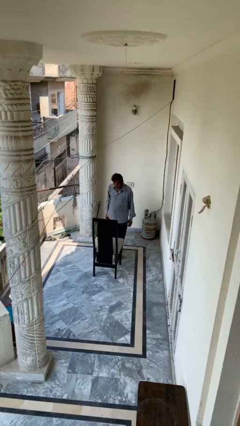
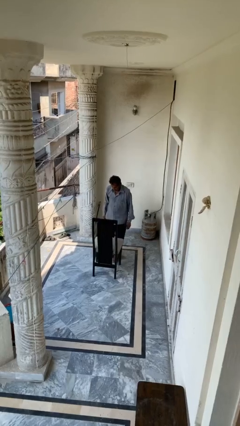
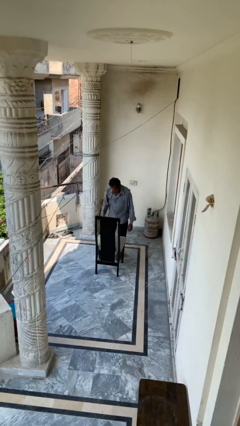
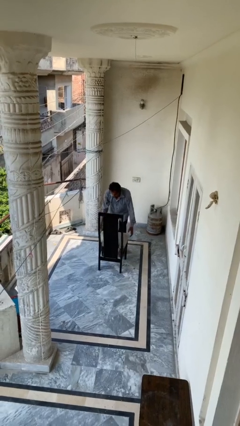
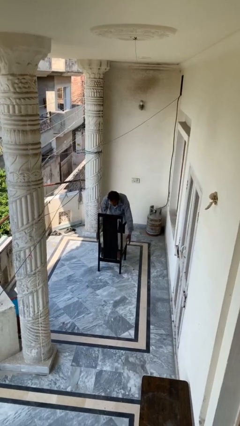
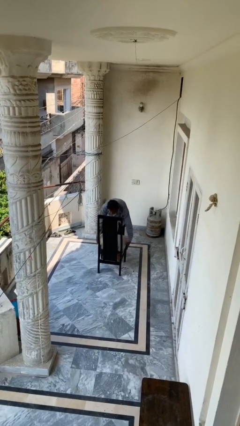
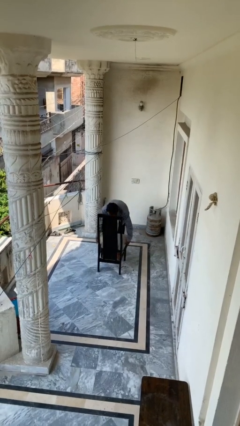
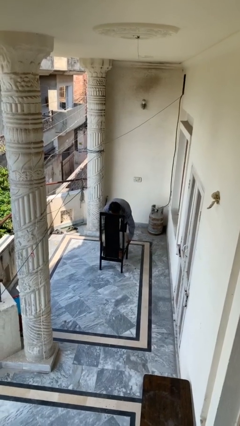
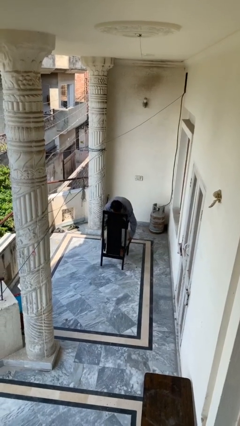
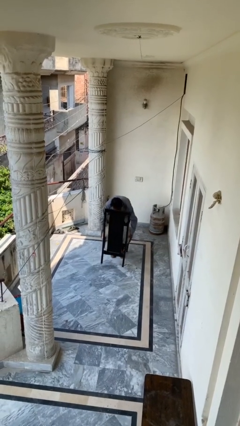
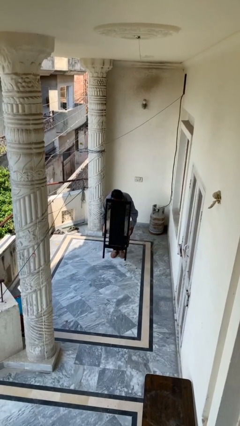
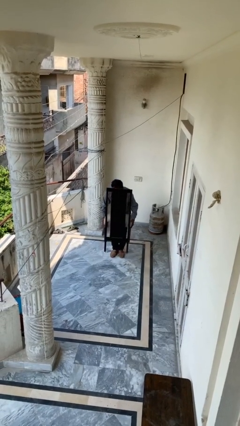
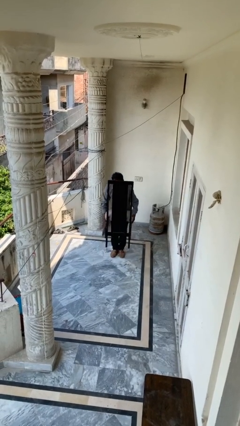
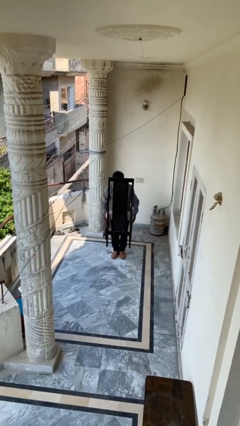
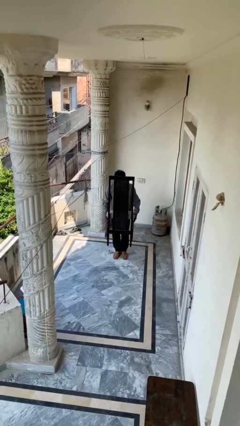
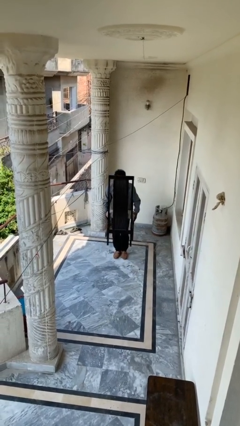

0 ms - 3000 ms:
person picks up object from floor

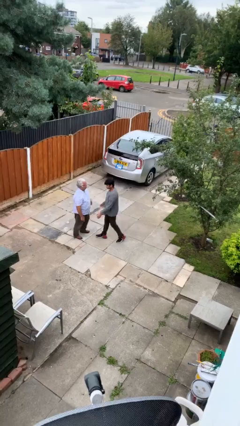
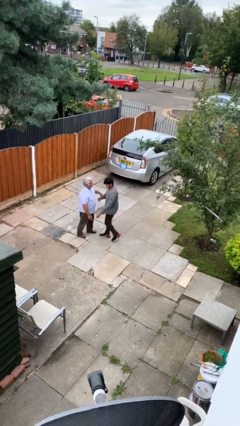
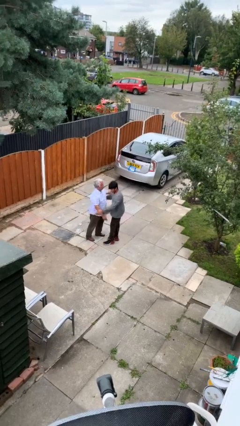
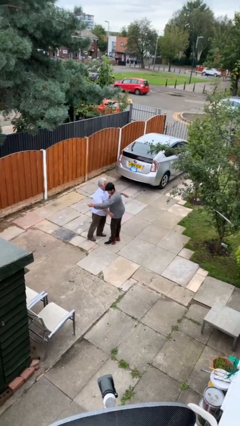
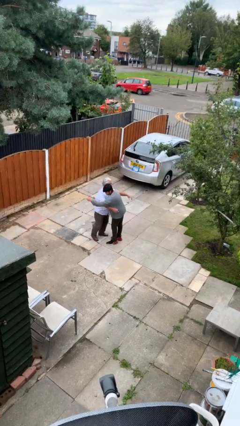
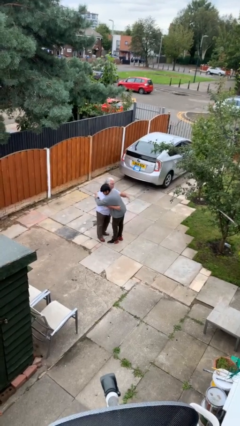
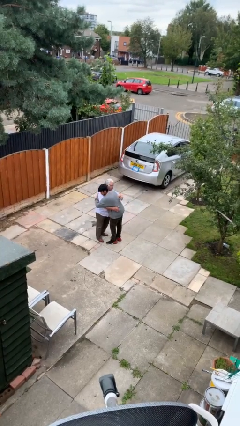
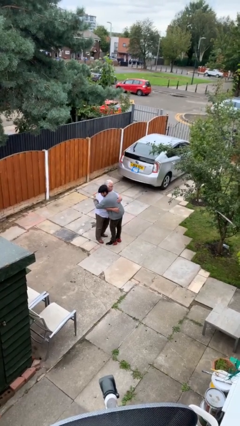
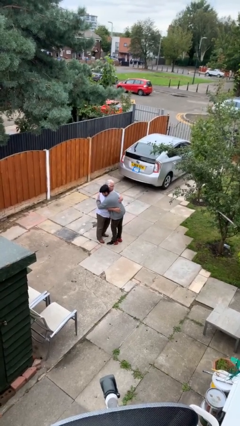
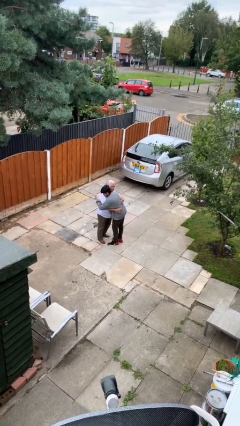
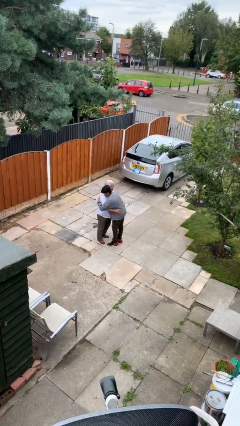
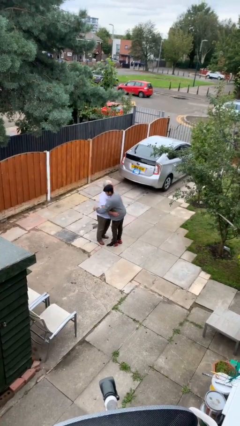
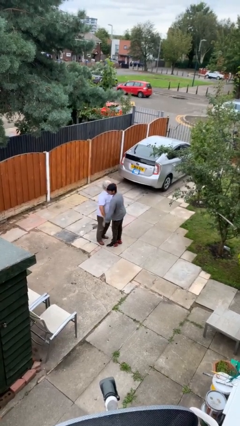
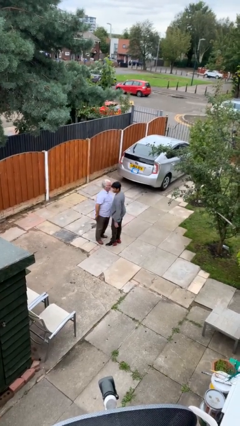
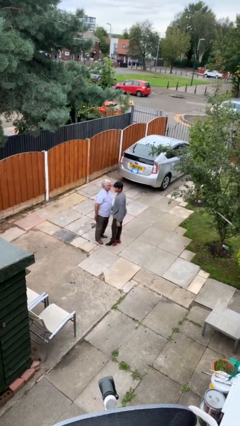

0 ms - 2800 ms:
person embraces person

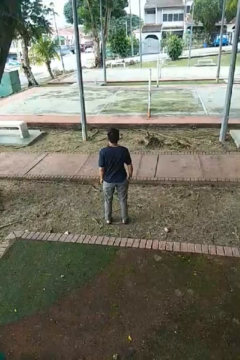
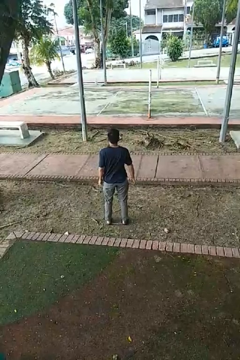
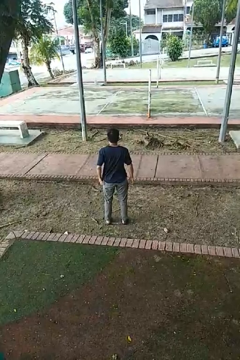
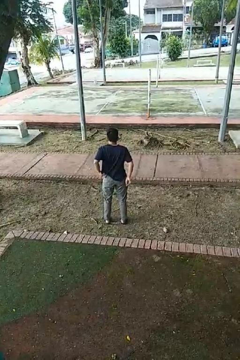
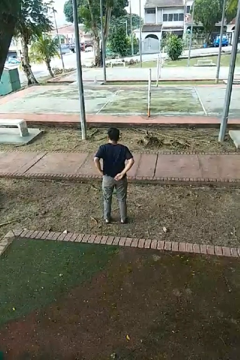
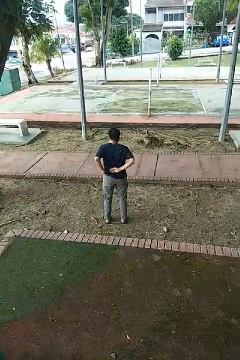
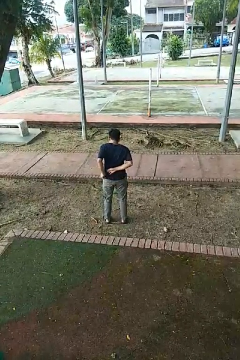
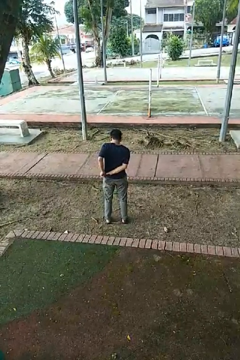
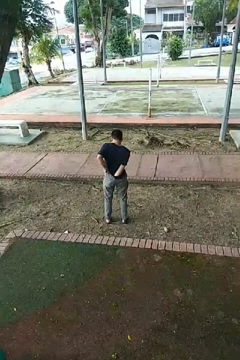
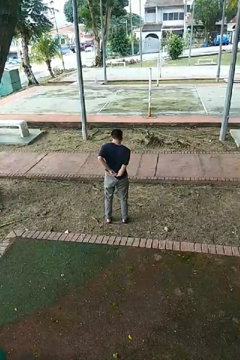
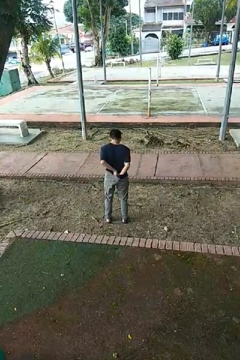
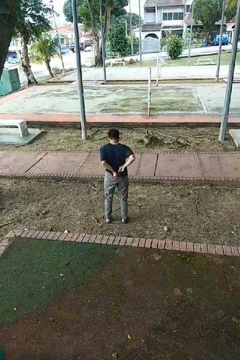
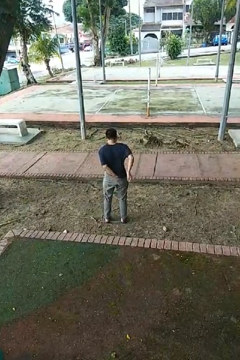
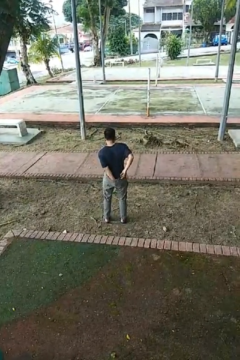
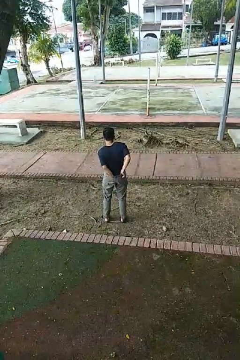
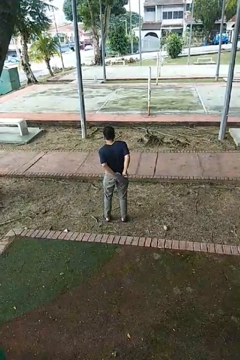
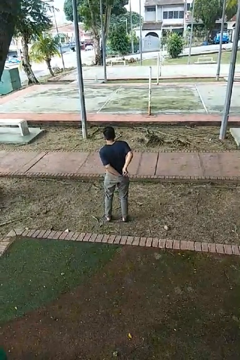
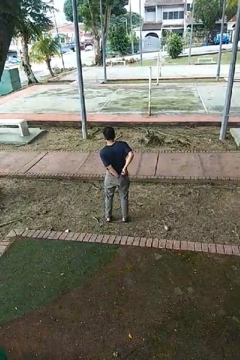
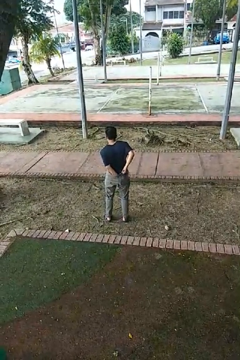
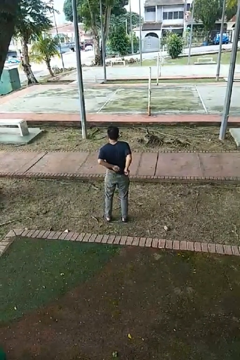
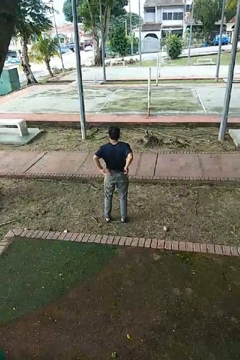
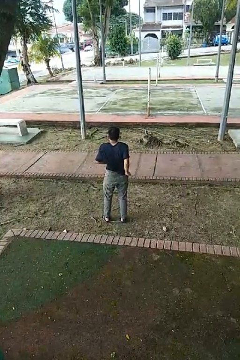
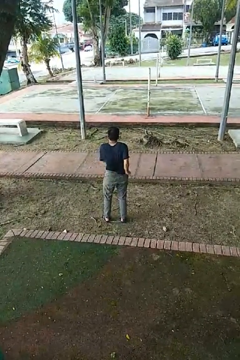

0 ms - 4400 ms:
person tucks in shirt

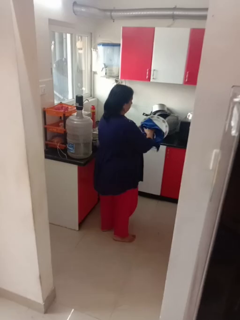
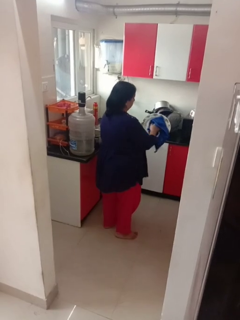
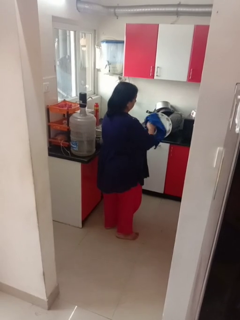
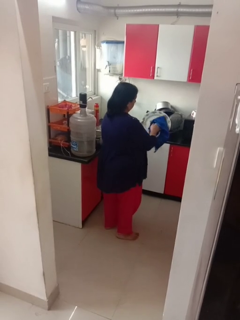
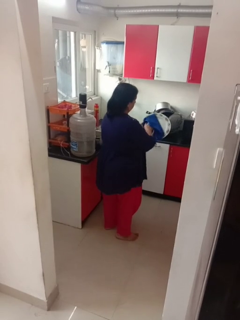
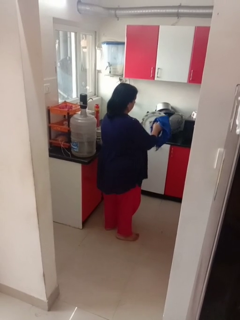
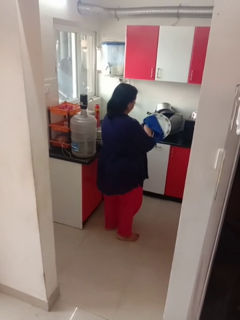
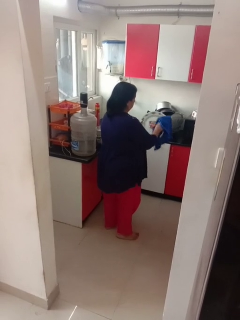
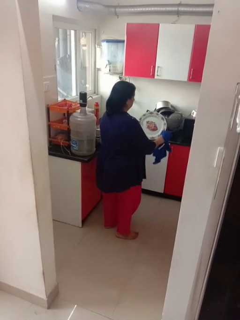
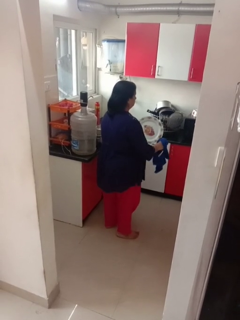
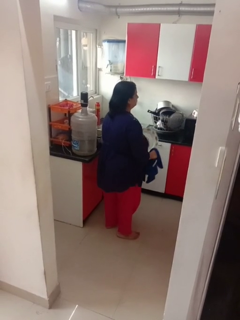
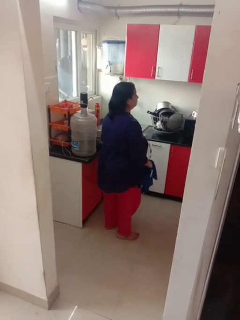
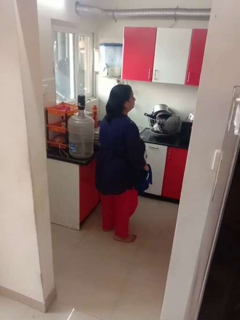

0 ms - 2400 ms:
person dries dish

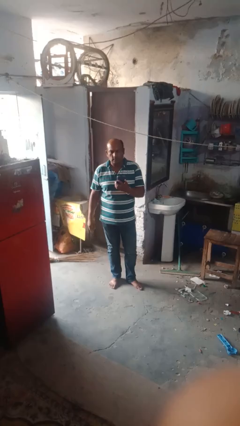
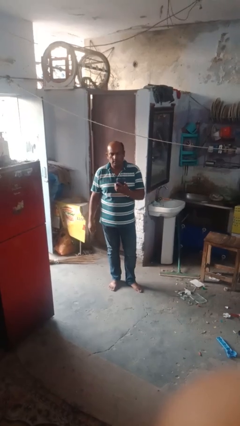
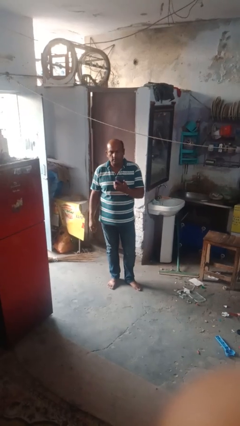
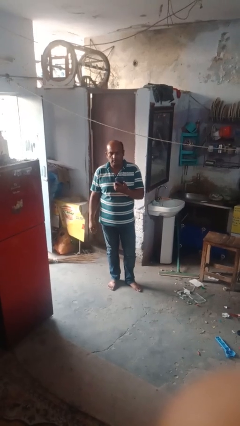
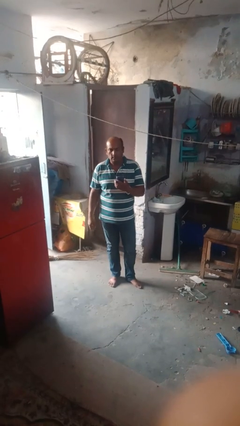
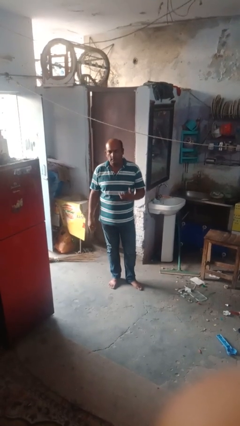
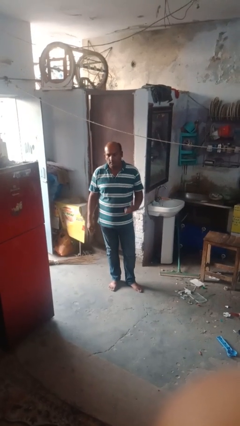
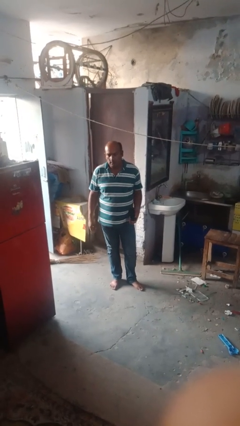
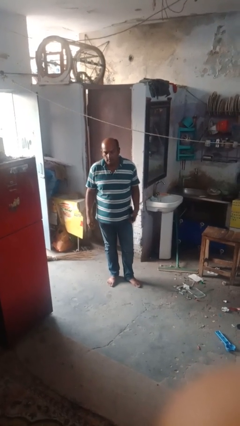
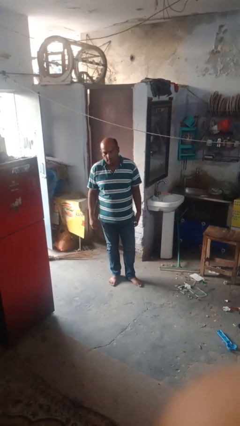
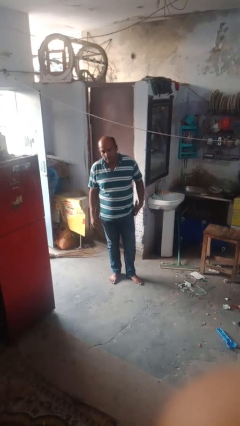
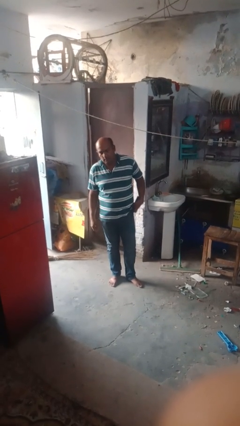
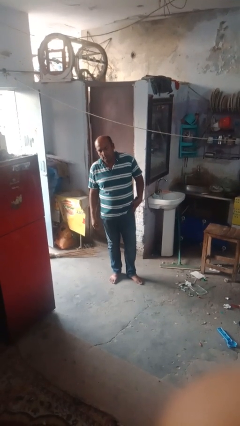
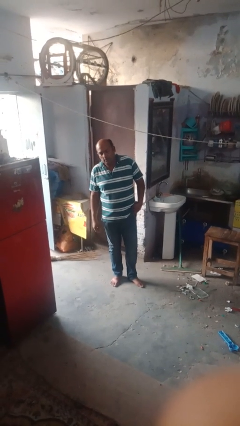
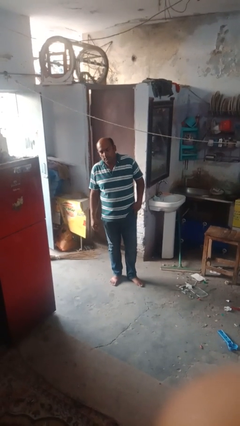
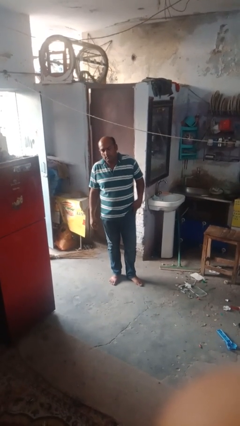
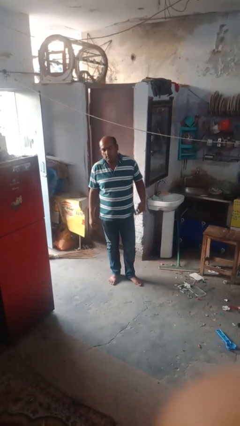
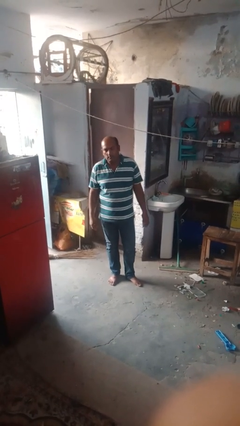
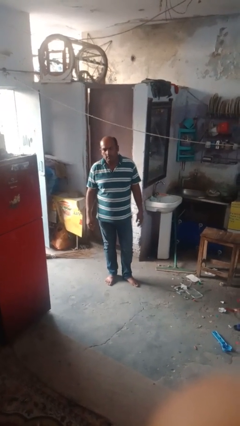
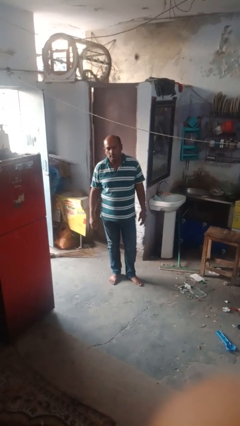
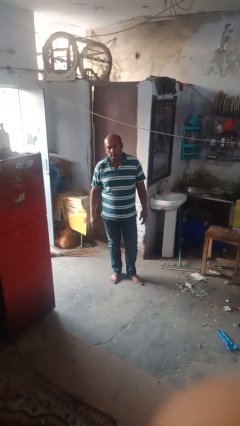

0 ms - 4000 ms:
person puts phone into pocket

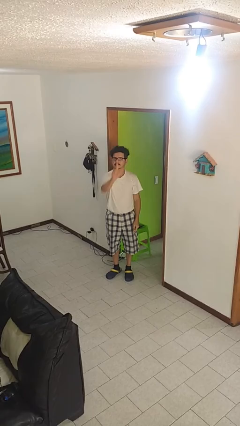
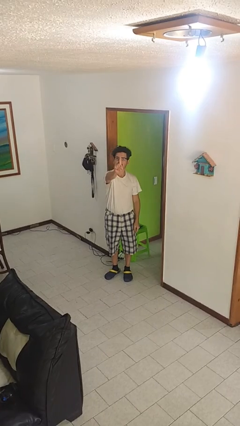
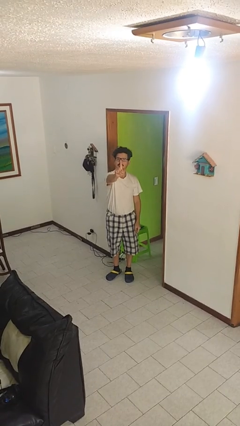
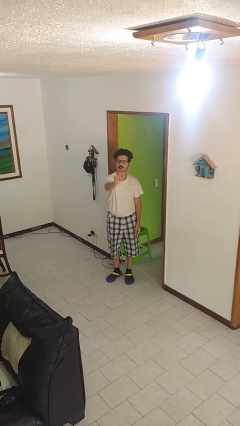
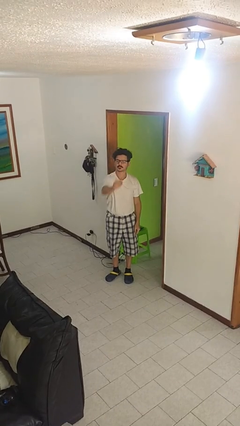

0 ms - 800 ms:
person gestures number one

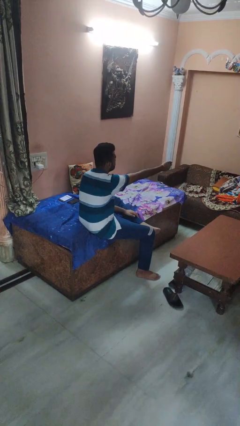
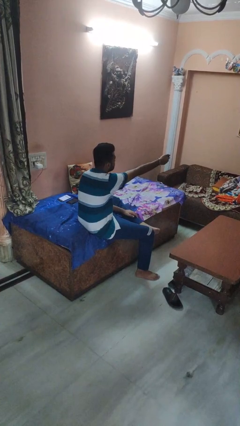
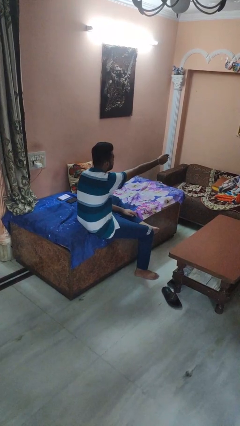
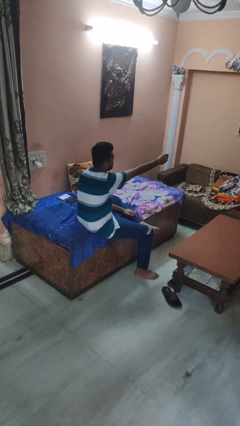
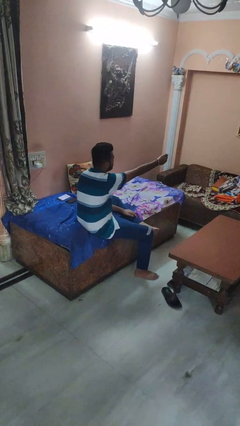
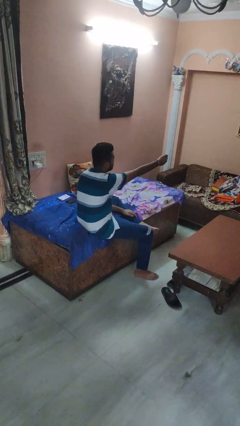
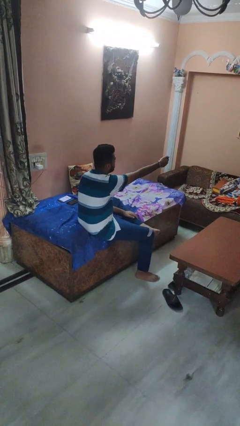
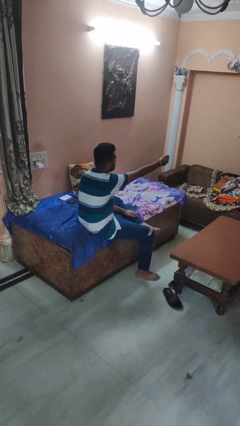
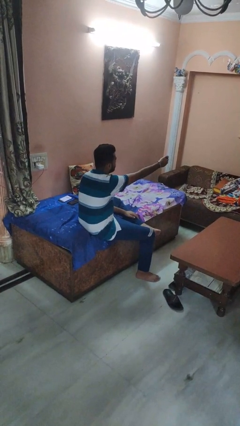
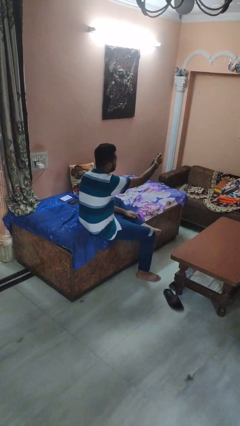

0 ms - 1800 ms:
person uses television remote
